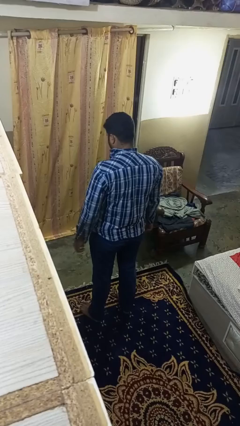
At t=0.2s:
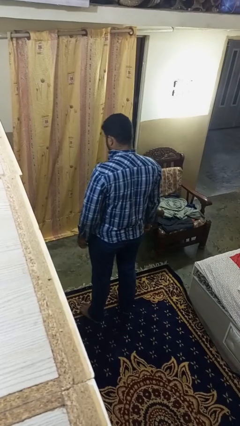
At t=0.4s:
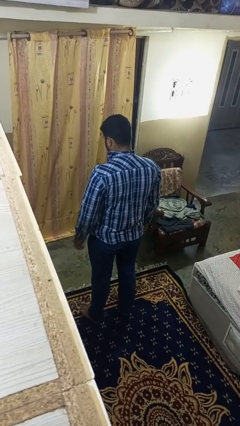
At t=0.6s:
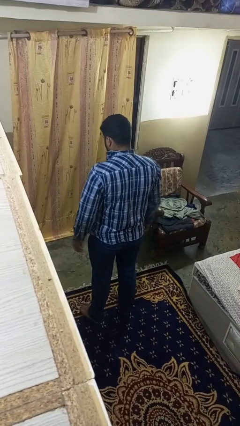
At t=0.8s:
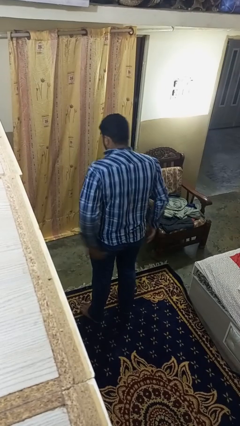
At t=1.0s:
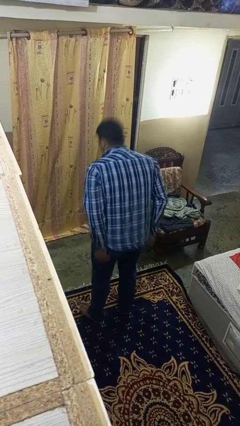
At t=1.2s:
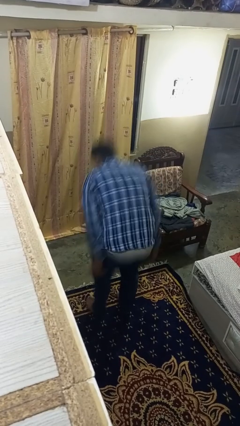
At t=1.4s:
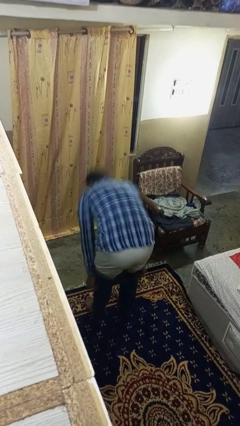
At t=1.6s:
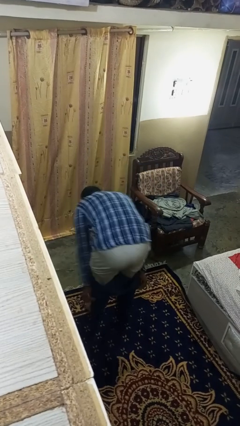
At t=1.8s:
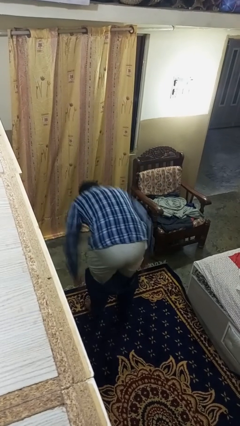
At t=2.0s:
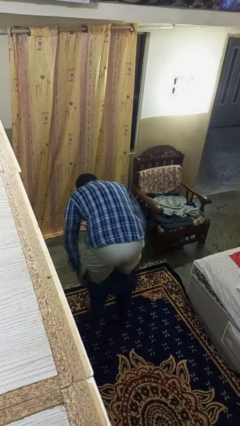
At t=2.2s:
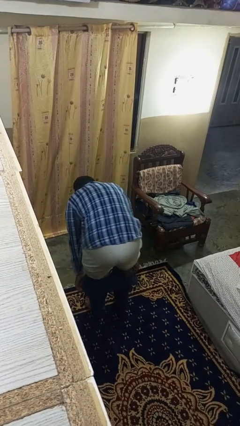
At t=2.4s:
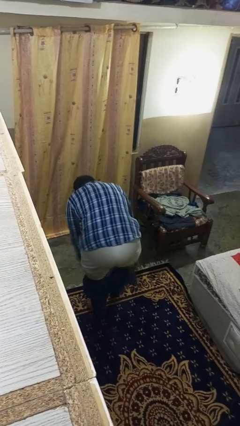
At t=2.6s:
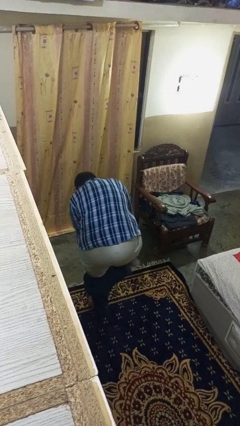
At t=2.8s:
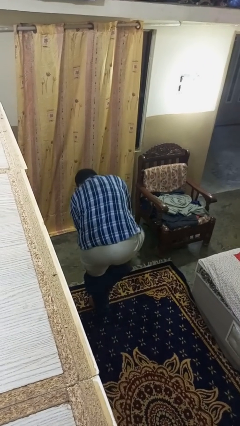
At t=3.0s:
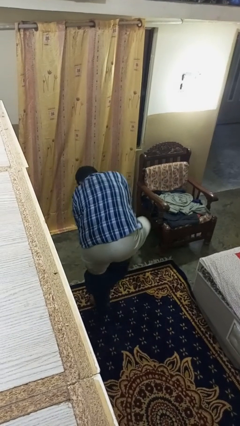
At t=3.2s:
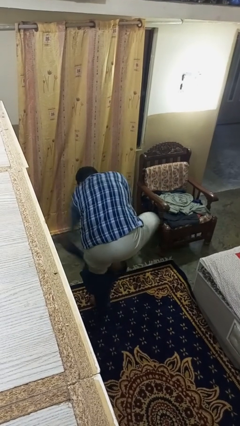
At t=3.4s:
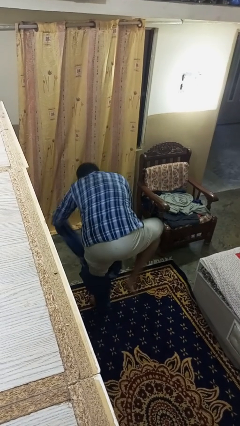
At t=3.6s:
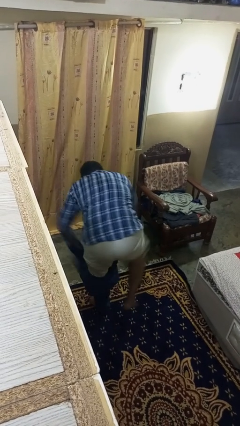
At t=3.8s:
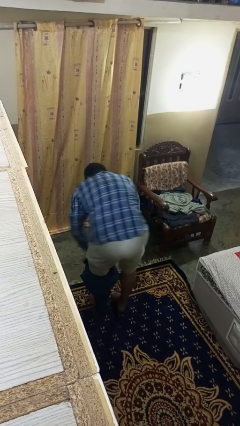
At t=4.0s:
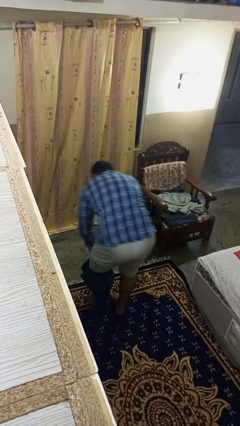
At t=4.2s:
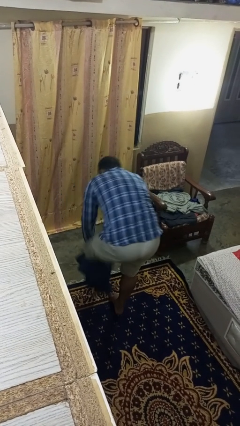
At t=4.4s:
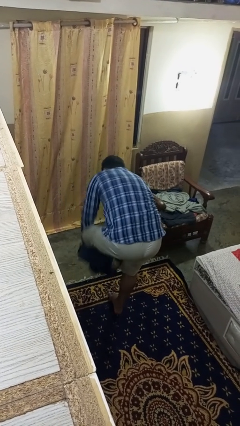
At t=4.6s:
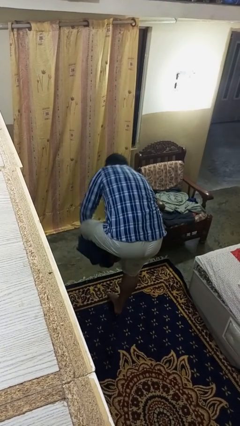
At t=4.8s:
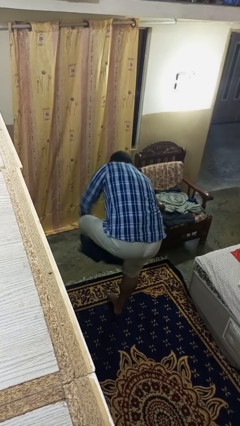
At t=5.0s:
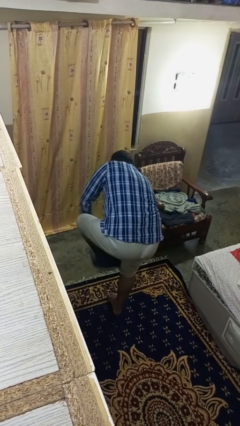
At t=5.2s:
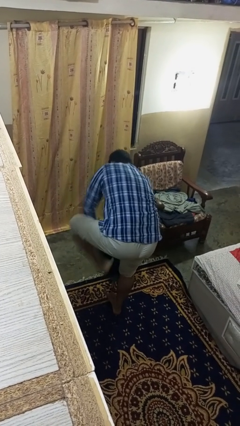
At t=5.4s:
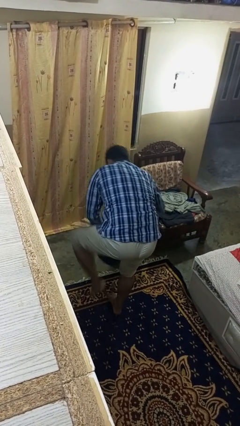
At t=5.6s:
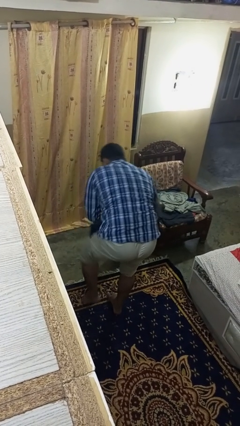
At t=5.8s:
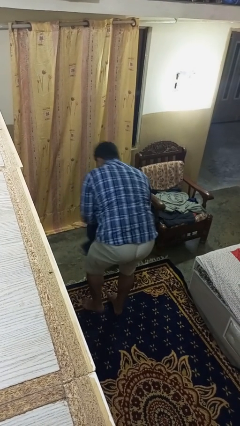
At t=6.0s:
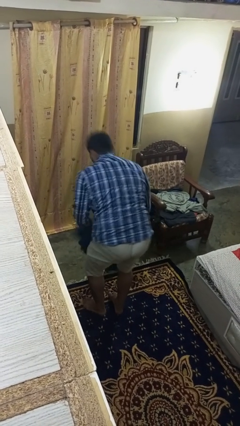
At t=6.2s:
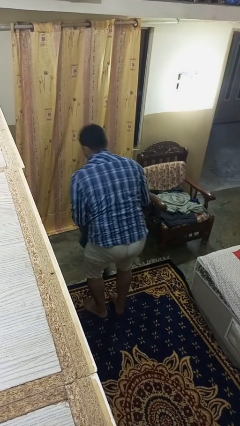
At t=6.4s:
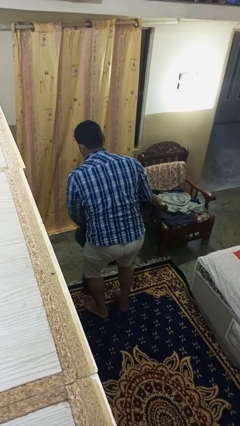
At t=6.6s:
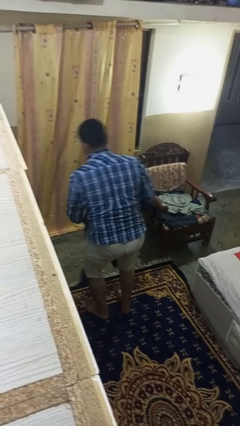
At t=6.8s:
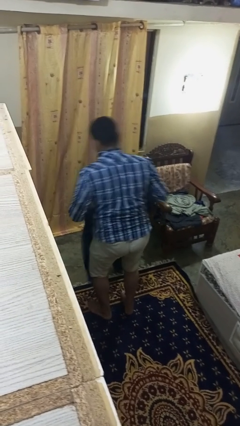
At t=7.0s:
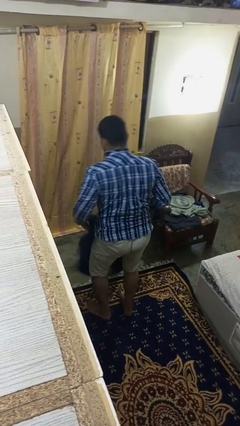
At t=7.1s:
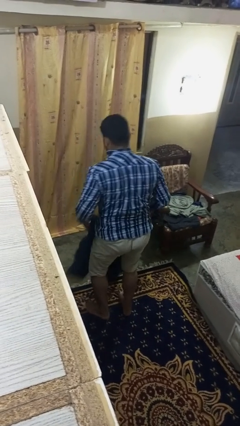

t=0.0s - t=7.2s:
person takes off pants

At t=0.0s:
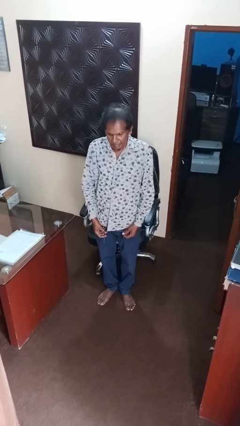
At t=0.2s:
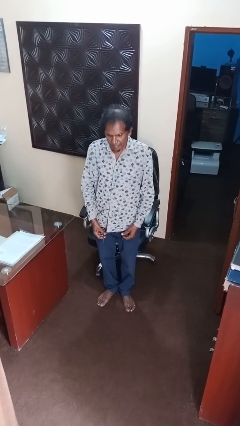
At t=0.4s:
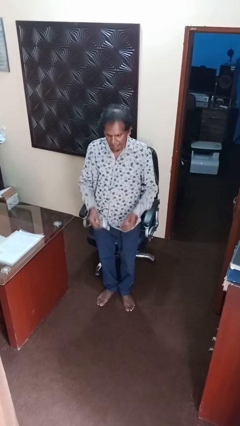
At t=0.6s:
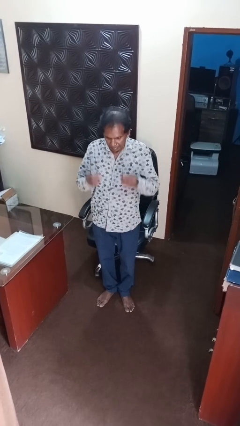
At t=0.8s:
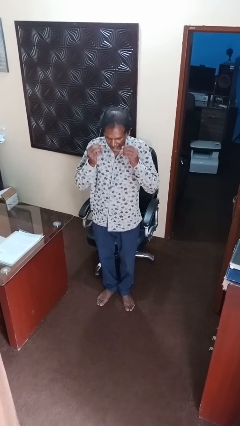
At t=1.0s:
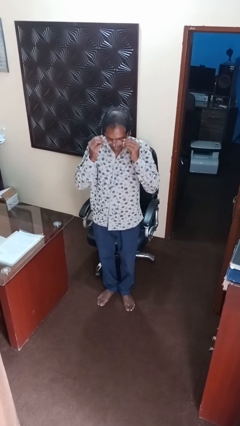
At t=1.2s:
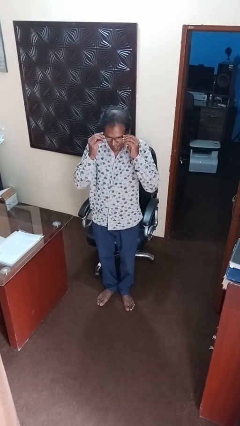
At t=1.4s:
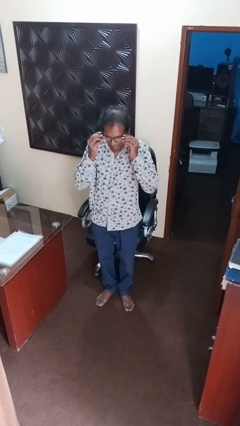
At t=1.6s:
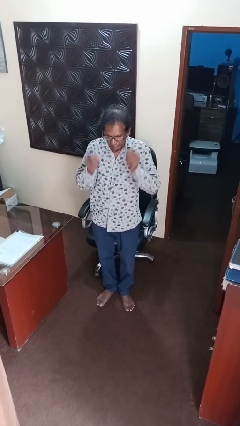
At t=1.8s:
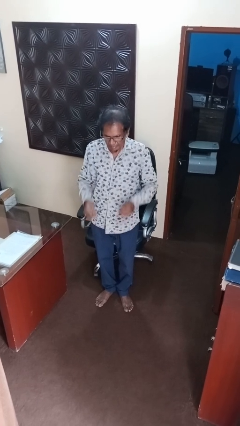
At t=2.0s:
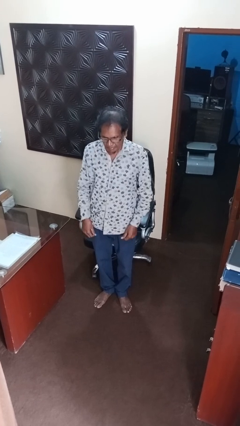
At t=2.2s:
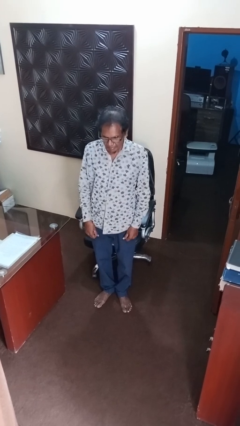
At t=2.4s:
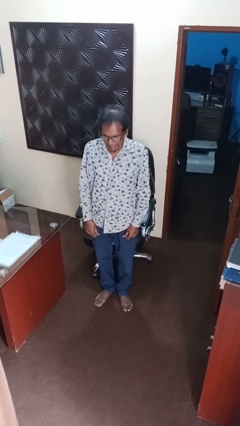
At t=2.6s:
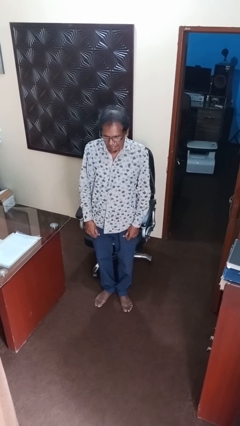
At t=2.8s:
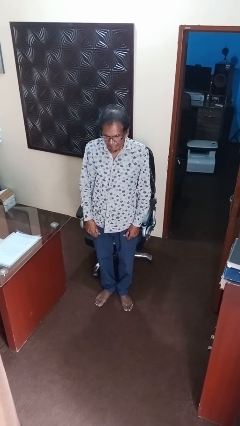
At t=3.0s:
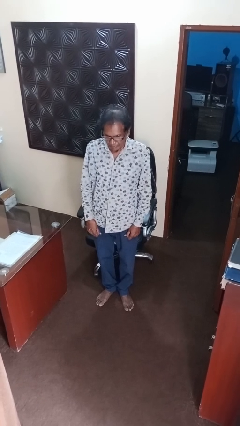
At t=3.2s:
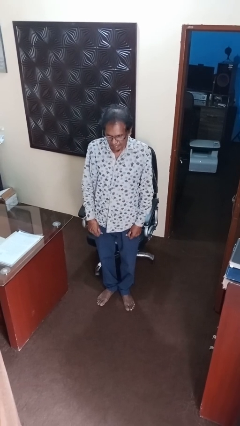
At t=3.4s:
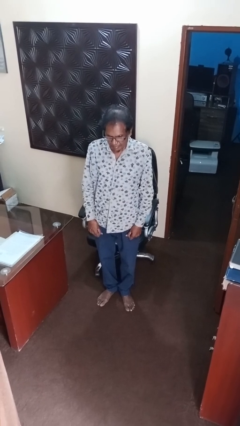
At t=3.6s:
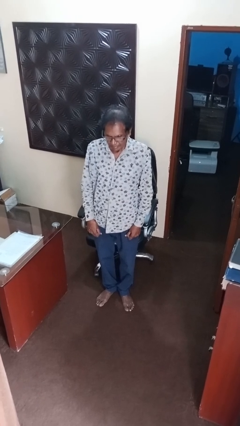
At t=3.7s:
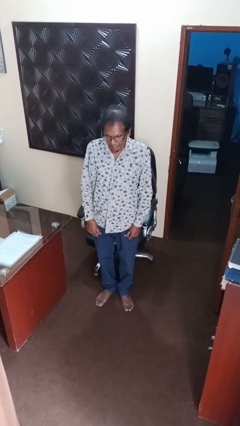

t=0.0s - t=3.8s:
person puts on glasses

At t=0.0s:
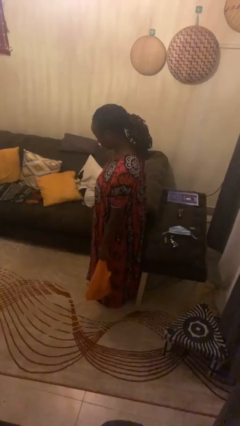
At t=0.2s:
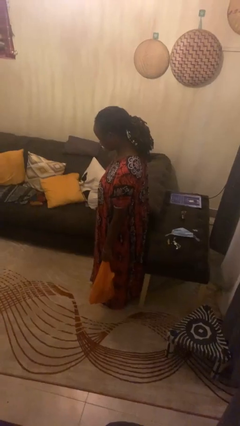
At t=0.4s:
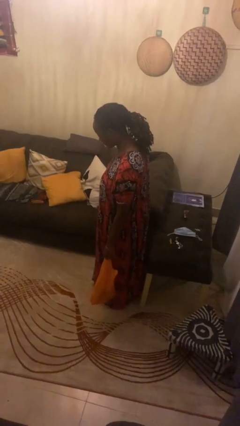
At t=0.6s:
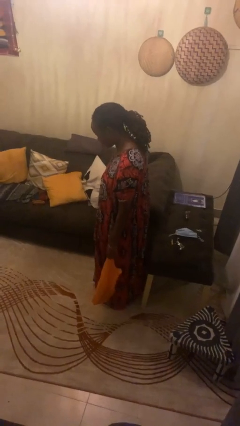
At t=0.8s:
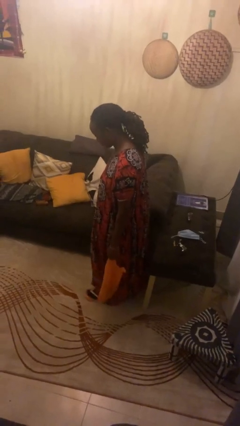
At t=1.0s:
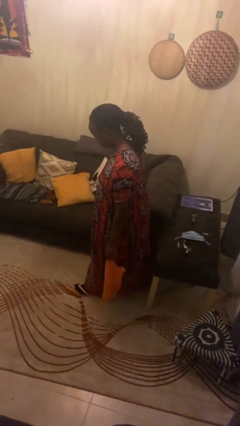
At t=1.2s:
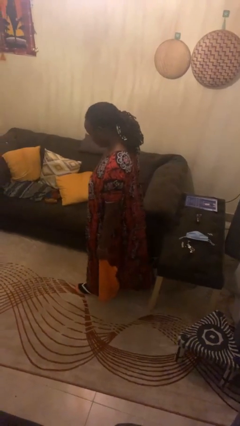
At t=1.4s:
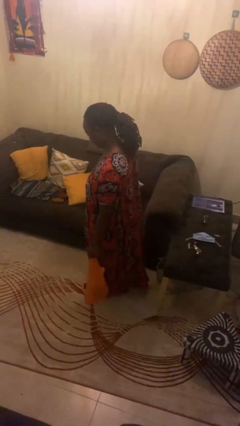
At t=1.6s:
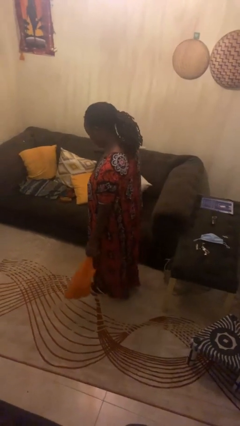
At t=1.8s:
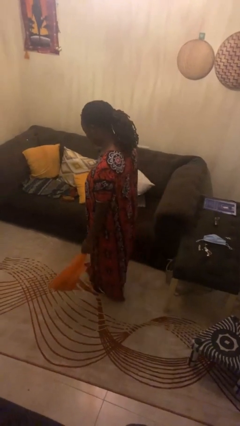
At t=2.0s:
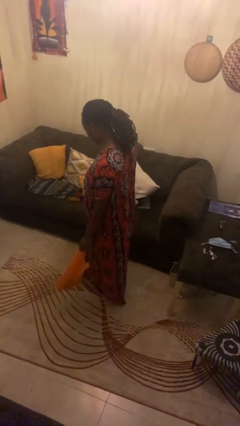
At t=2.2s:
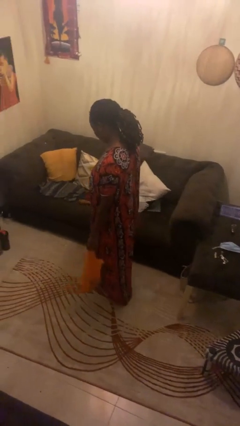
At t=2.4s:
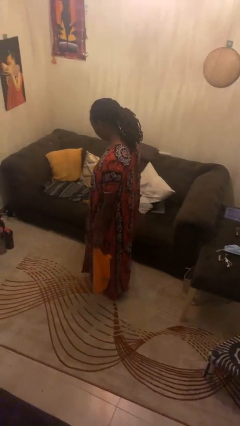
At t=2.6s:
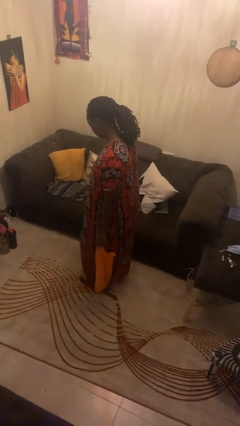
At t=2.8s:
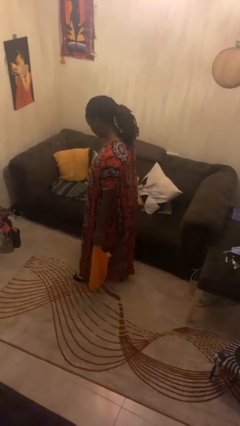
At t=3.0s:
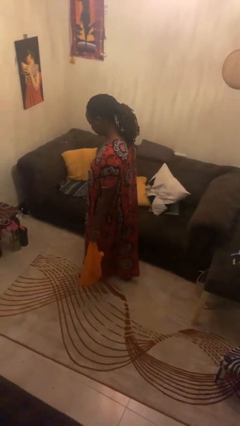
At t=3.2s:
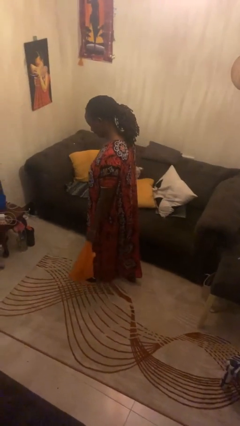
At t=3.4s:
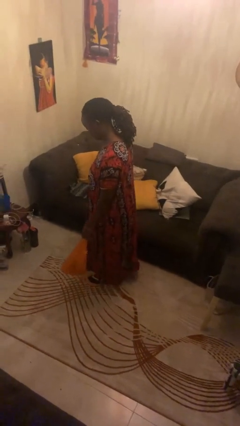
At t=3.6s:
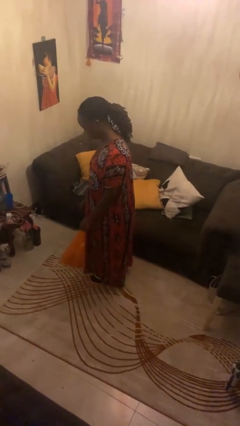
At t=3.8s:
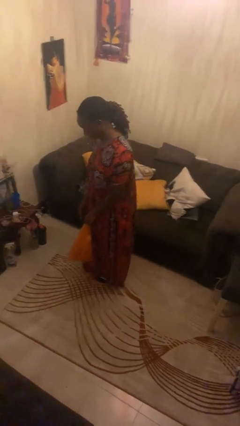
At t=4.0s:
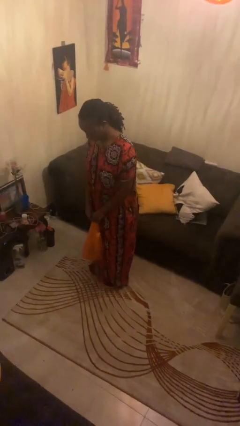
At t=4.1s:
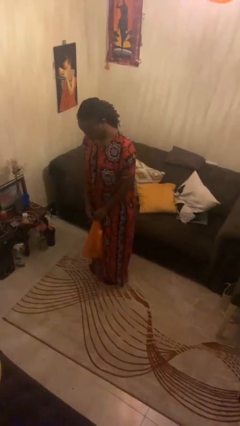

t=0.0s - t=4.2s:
person carries groceries

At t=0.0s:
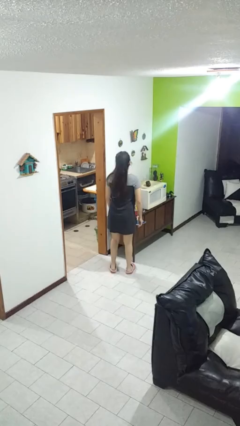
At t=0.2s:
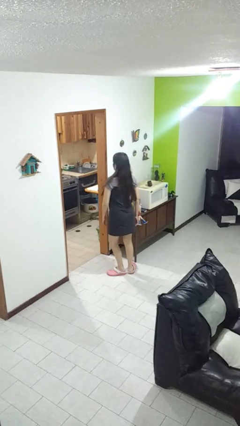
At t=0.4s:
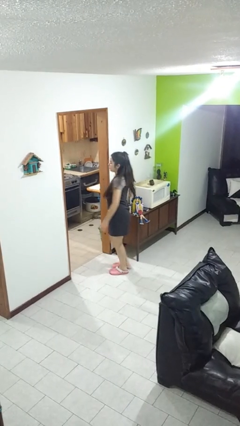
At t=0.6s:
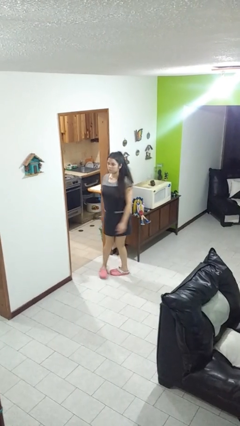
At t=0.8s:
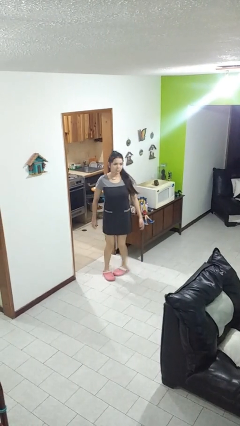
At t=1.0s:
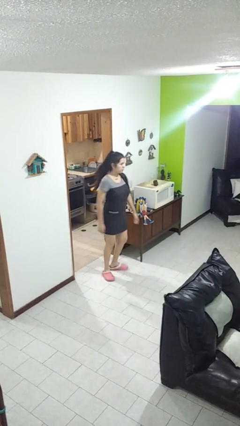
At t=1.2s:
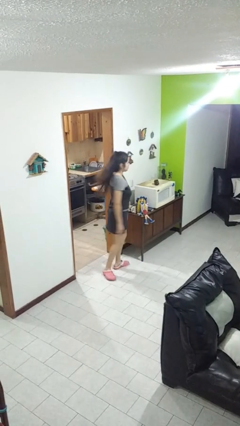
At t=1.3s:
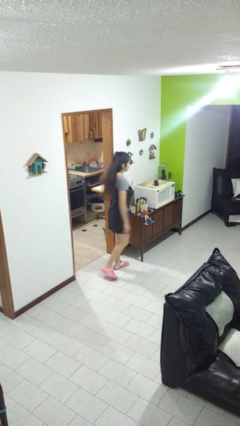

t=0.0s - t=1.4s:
person twirls

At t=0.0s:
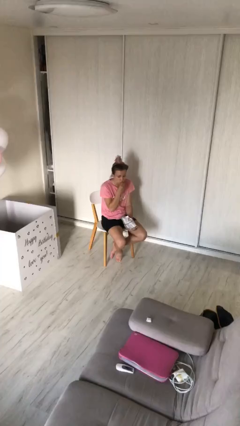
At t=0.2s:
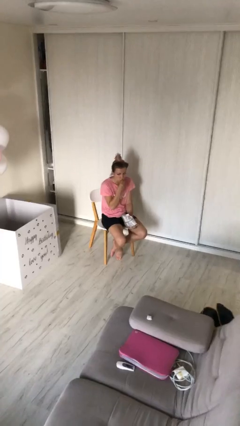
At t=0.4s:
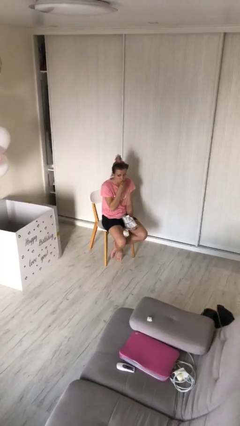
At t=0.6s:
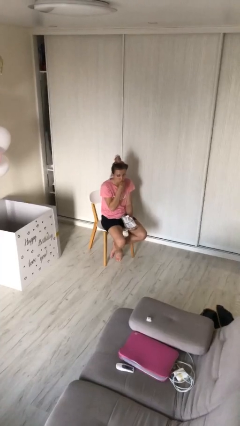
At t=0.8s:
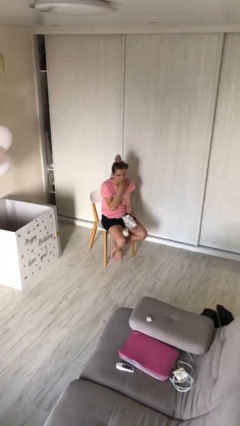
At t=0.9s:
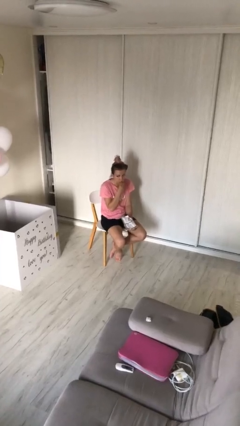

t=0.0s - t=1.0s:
person eats snack from bag
